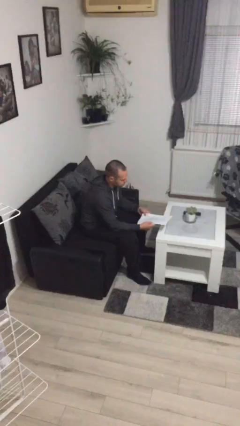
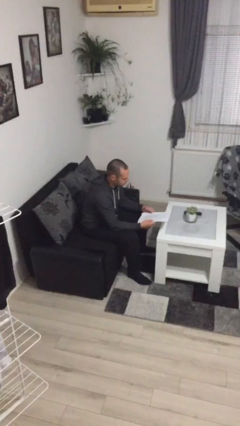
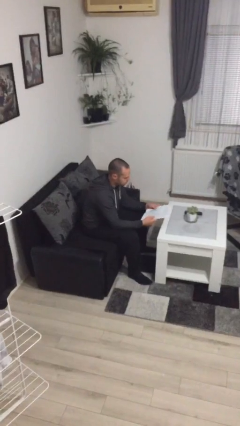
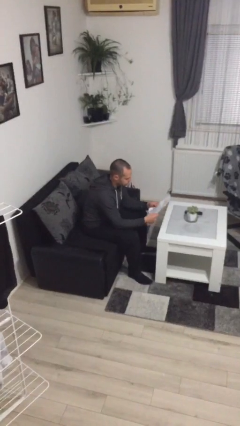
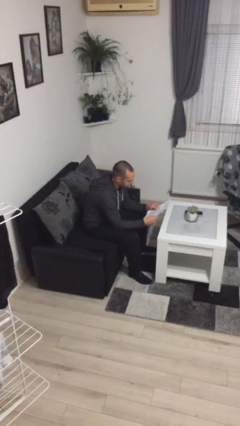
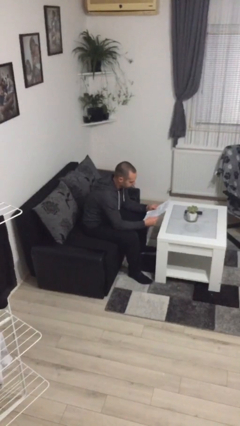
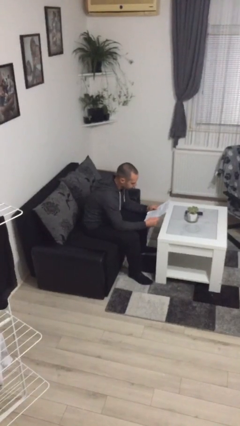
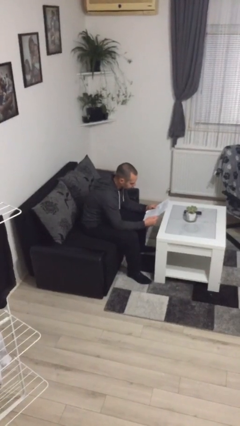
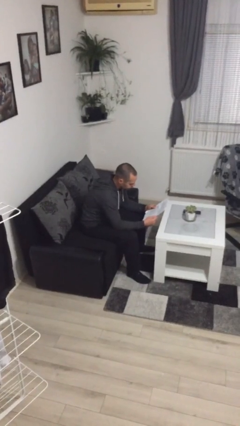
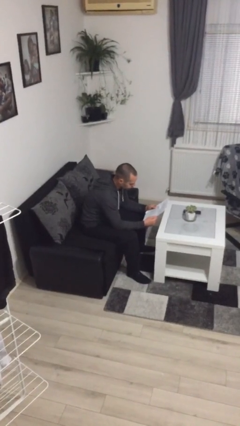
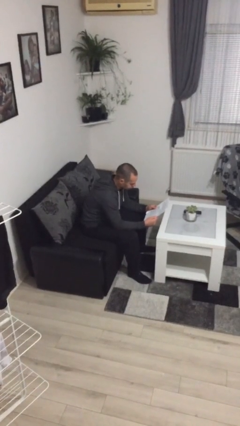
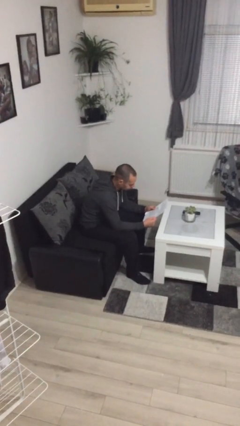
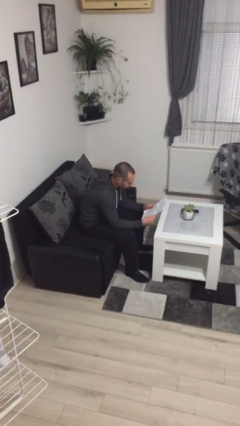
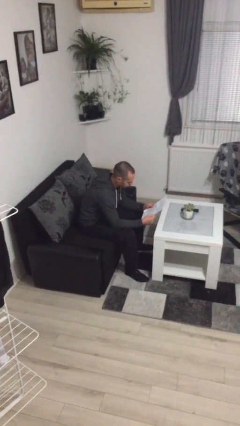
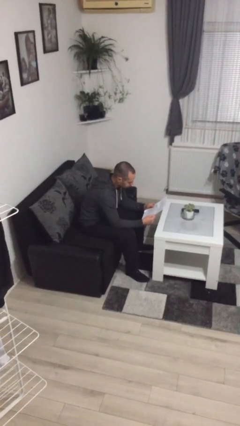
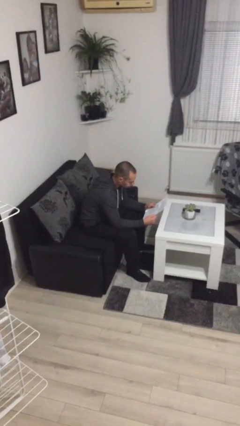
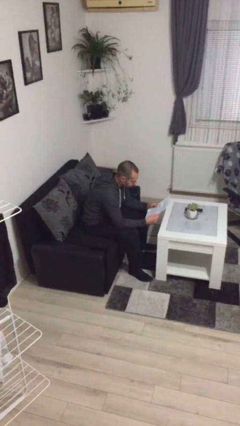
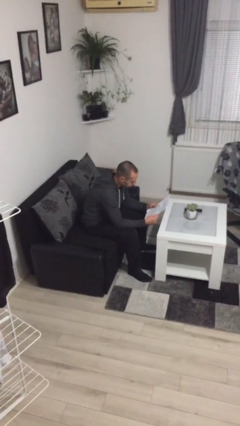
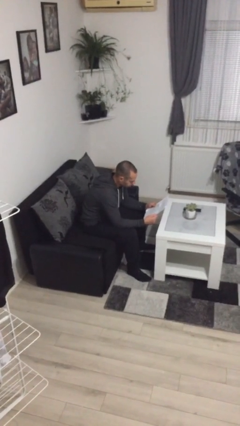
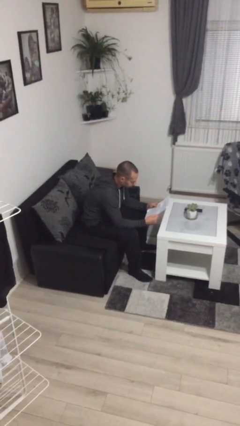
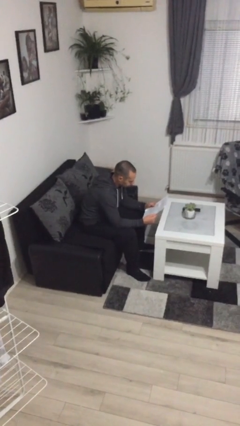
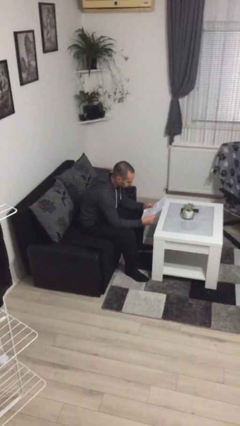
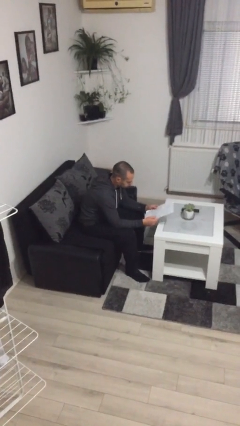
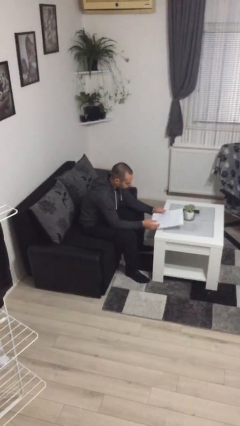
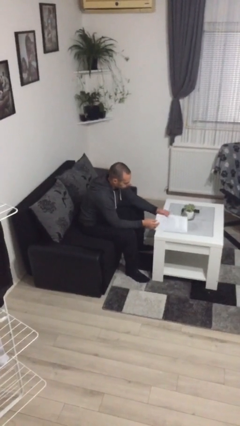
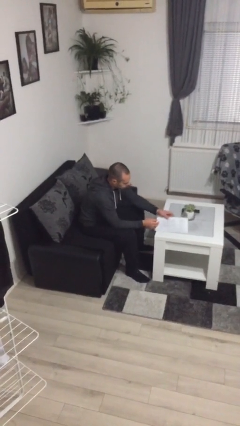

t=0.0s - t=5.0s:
person reads document

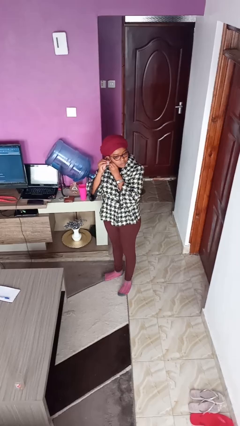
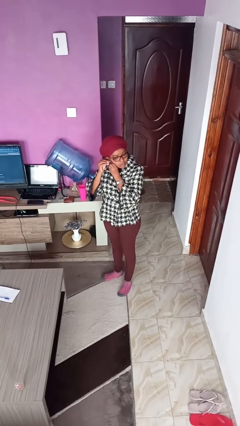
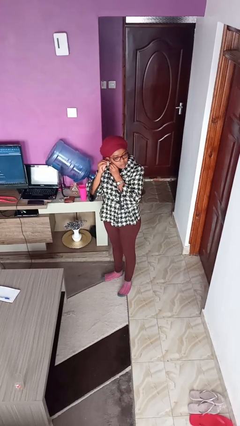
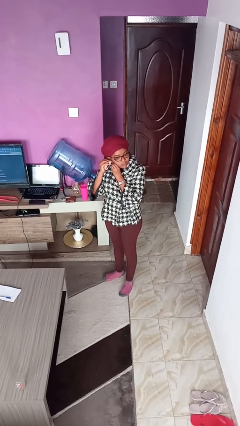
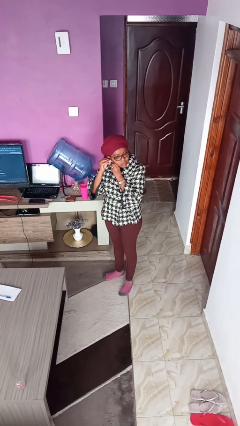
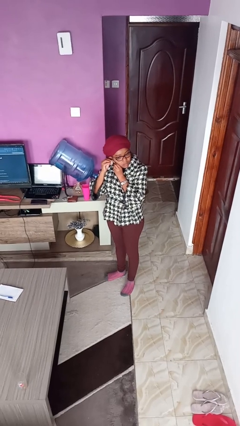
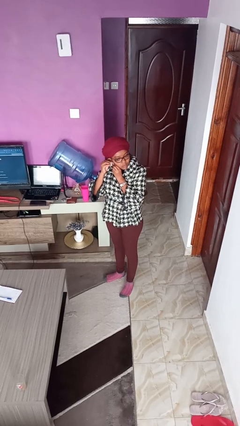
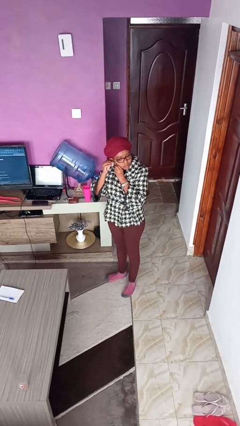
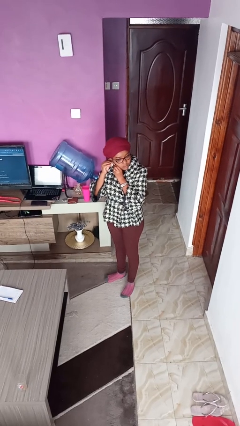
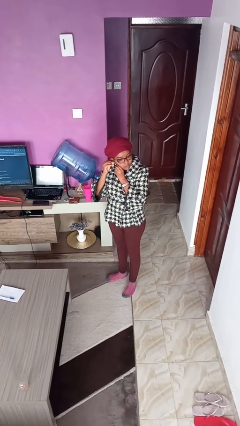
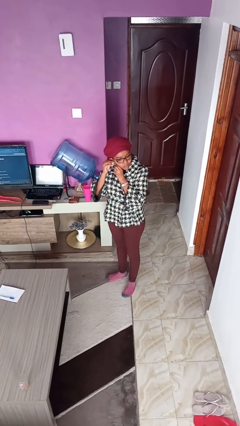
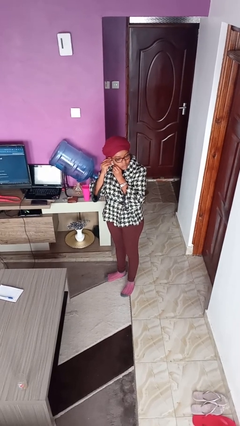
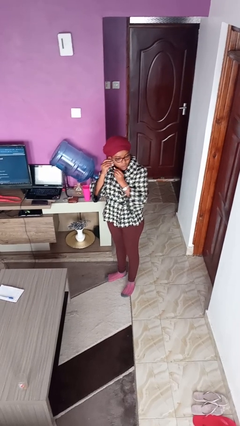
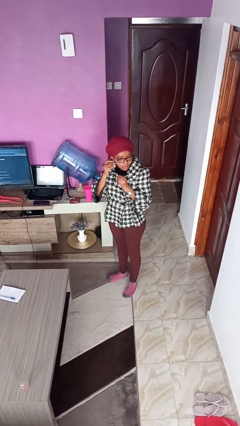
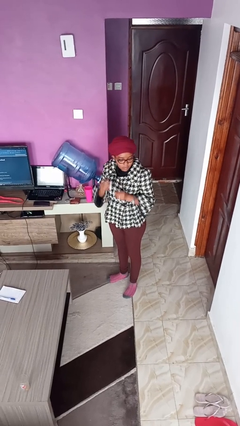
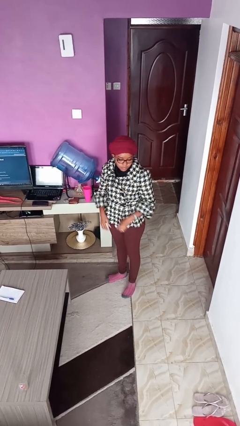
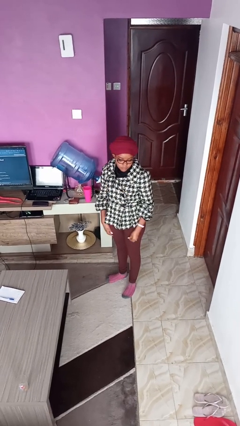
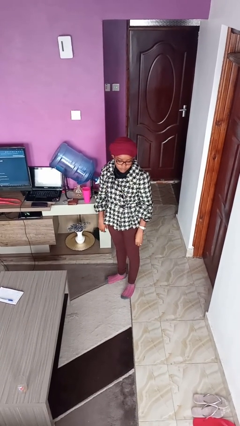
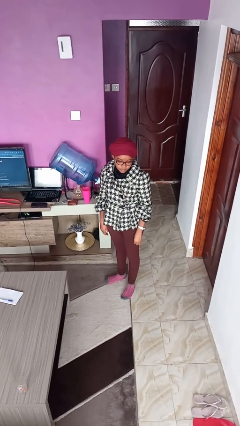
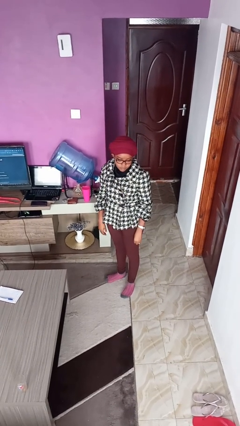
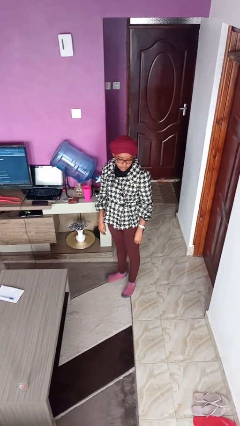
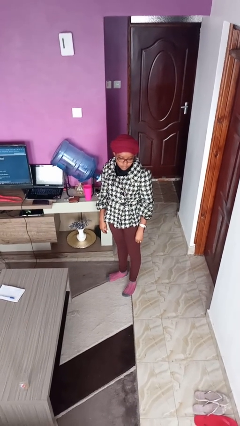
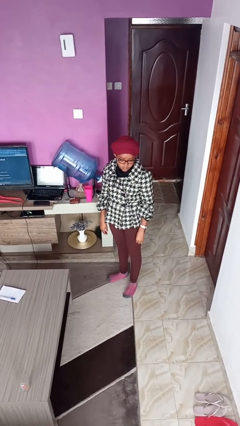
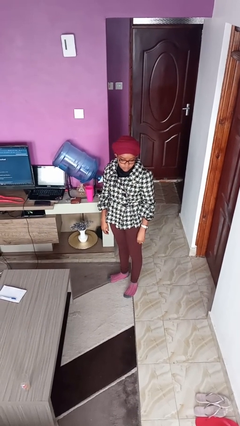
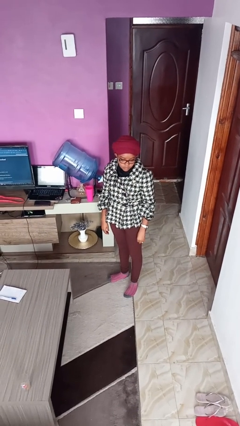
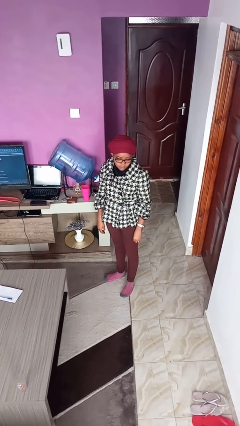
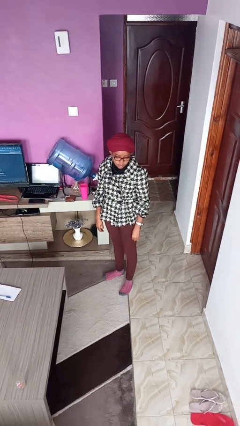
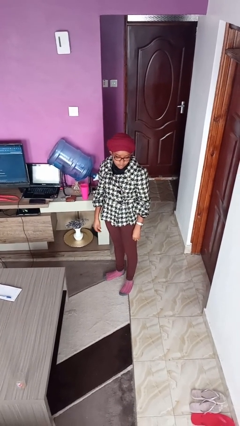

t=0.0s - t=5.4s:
person puts on earrings

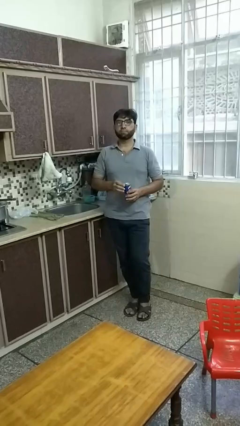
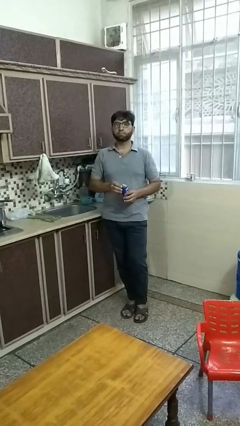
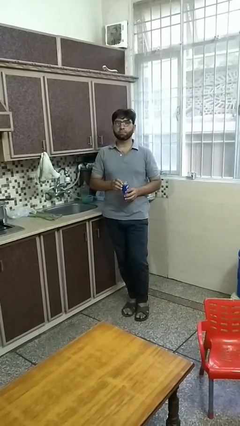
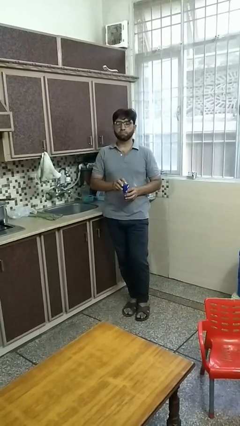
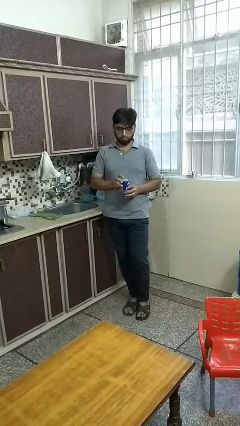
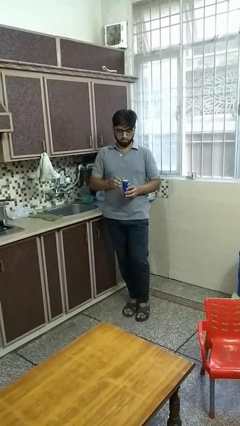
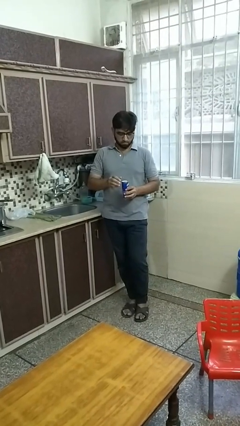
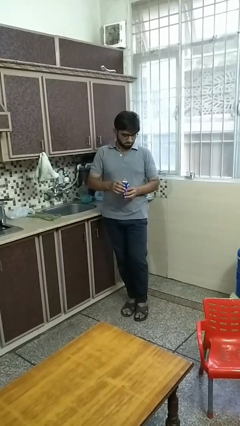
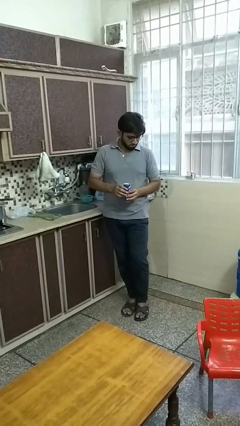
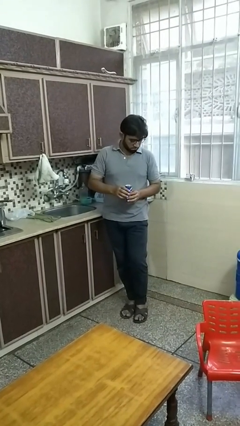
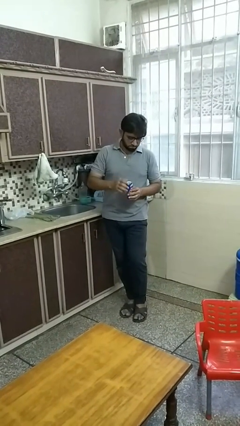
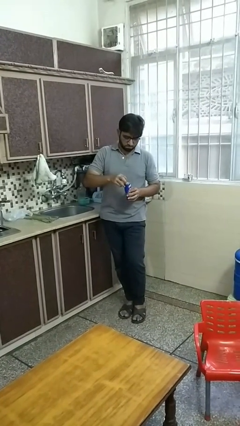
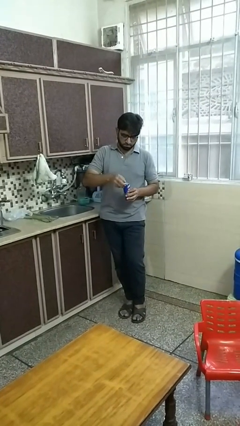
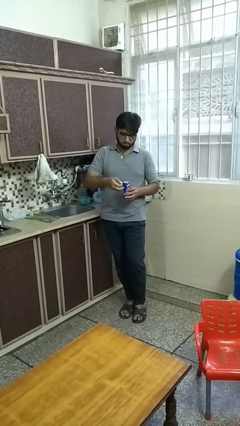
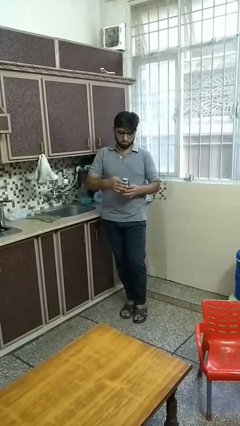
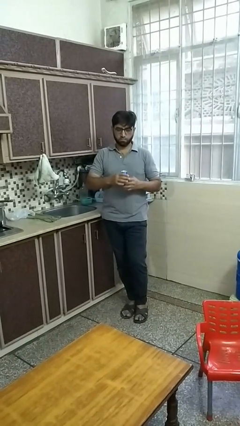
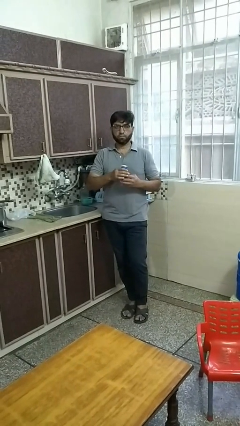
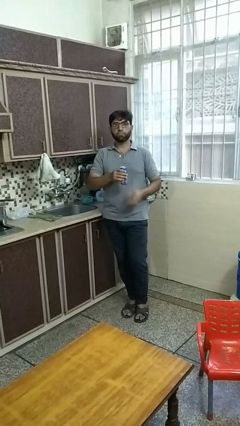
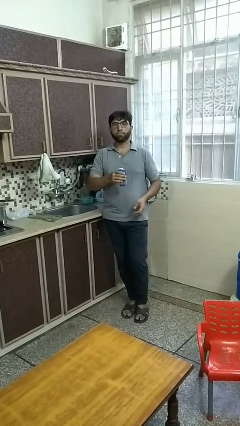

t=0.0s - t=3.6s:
person opens beverage can

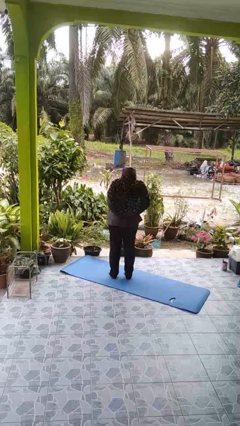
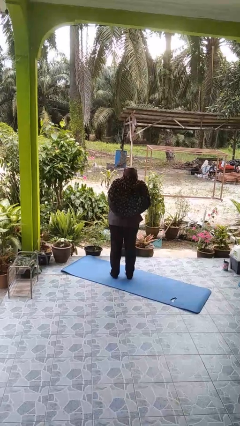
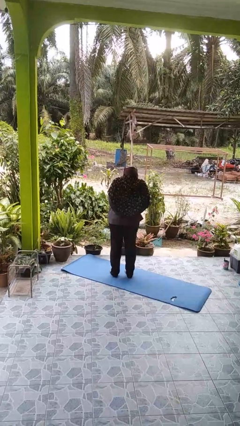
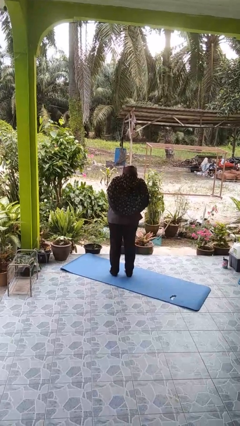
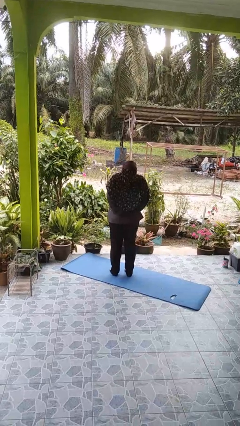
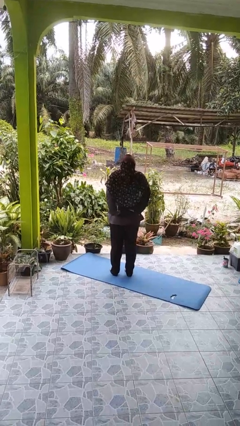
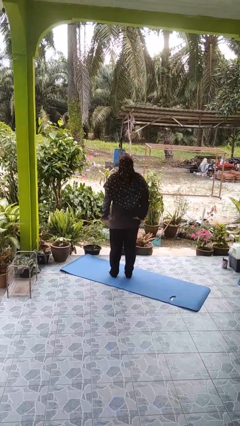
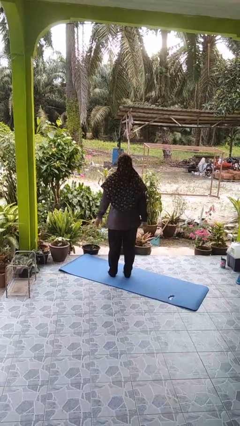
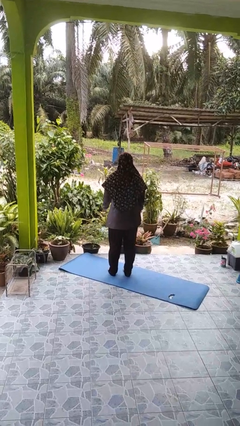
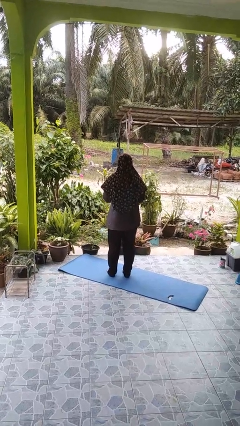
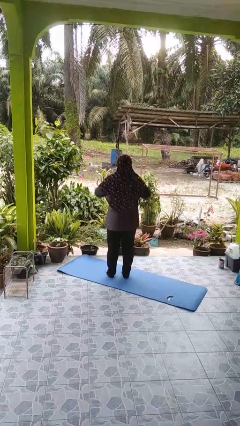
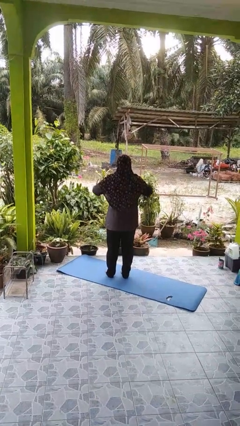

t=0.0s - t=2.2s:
person stretches back

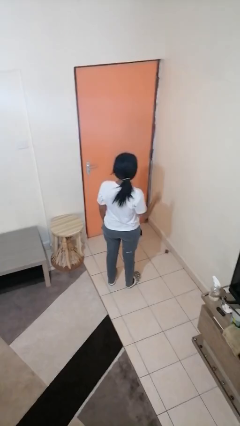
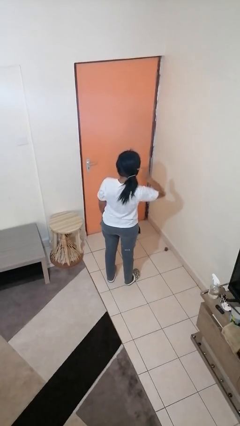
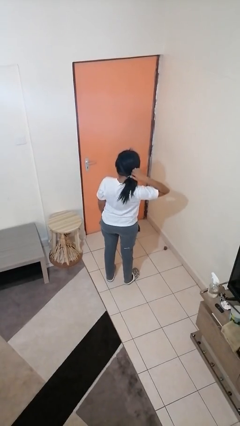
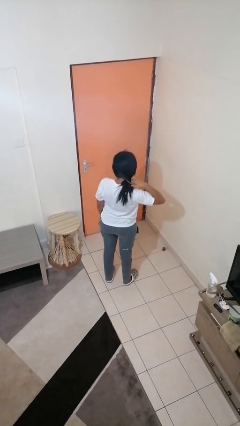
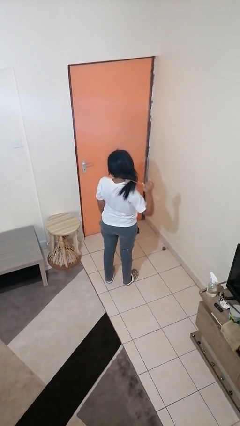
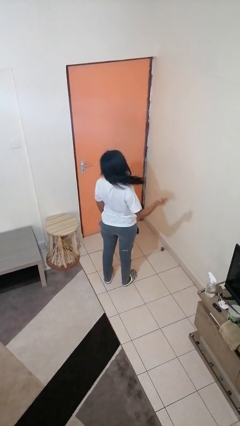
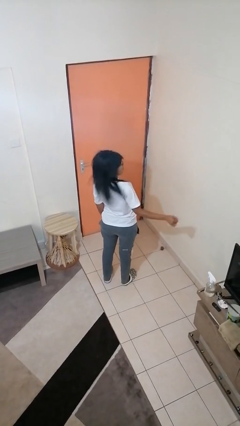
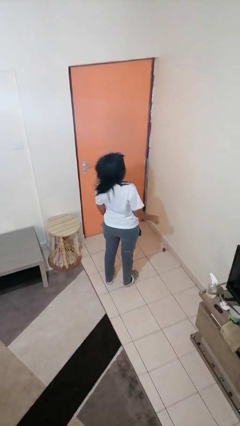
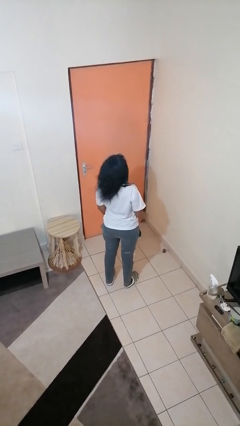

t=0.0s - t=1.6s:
person takes off hairtie
